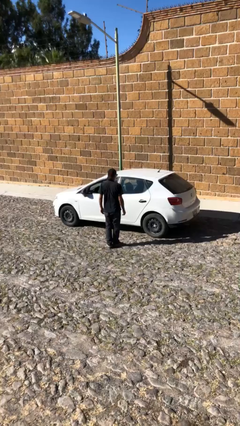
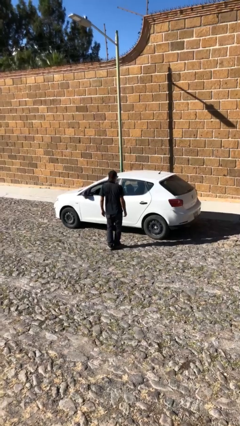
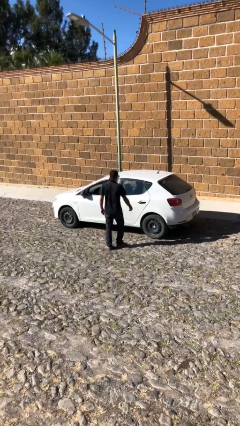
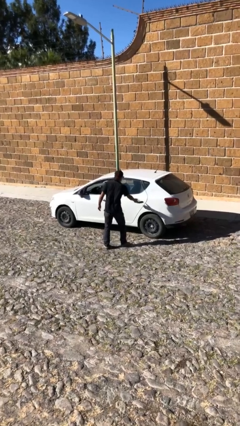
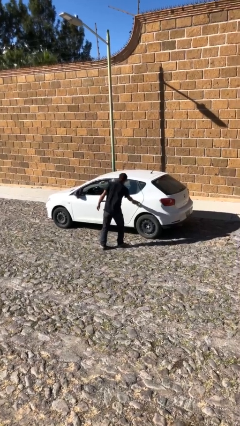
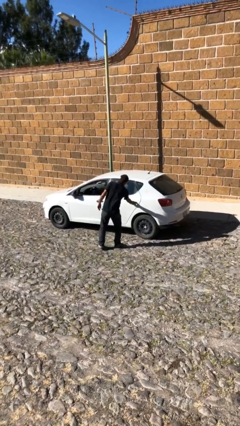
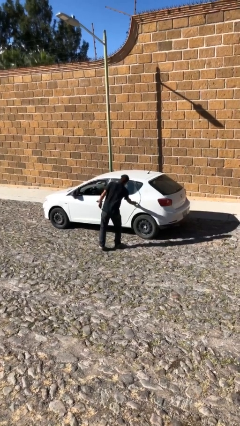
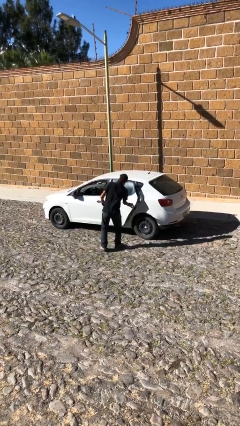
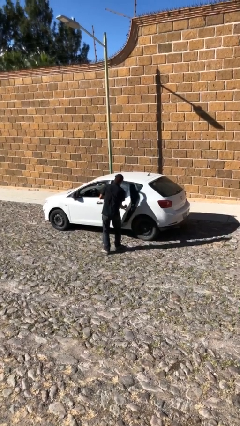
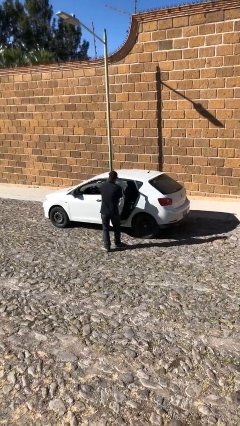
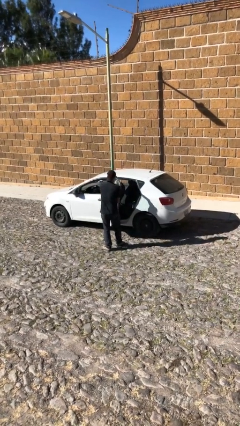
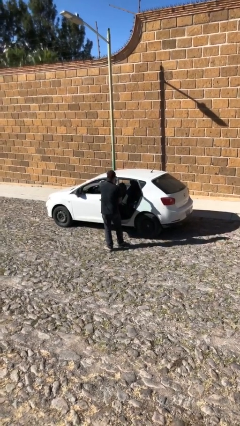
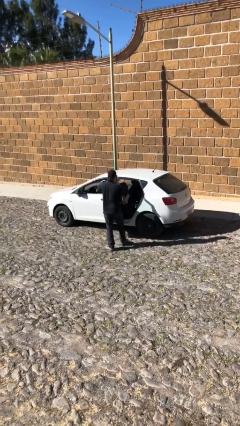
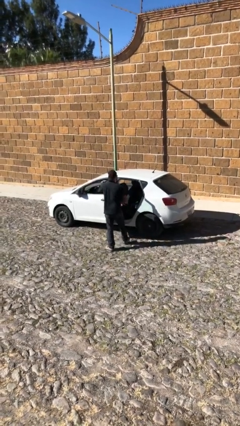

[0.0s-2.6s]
person opens car door

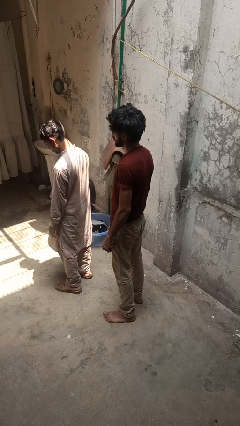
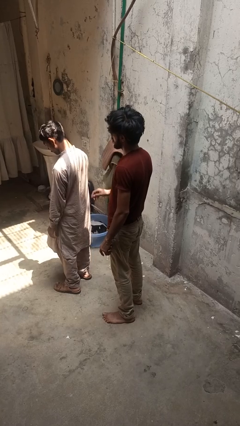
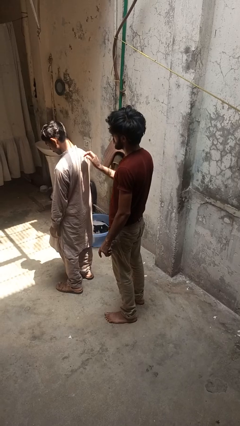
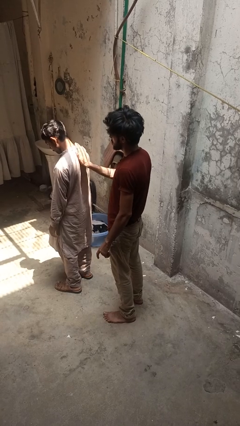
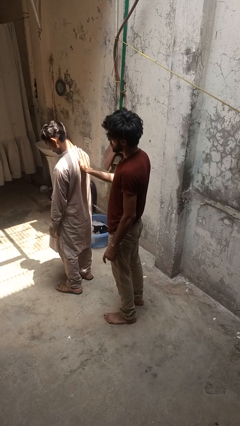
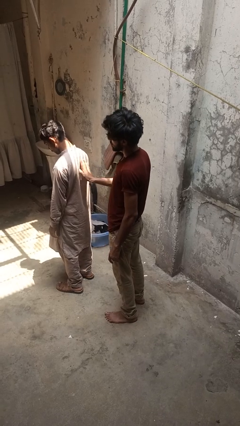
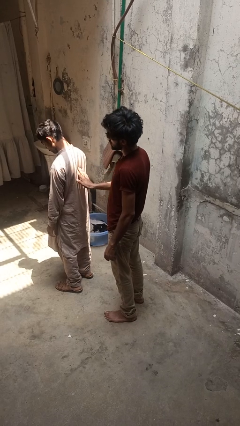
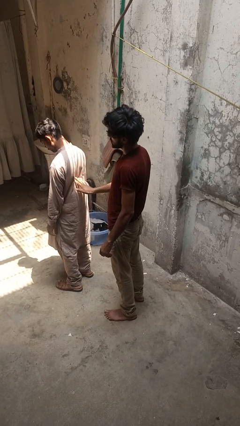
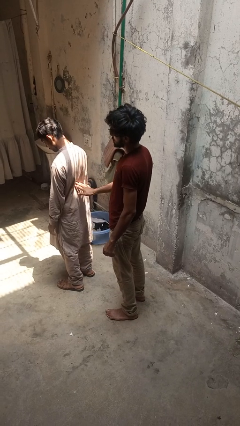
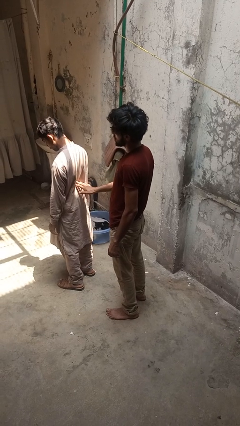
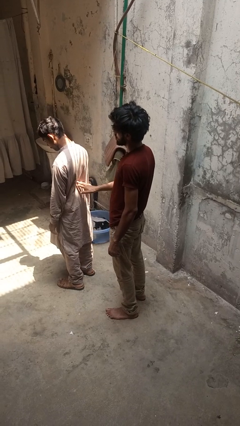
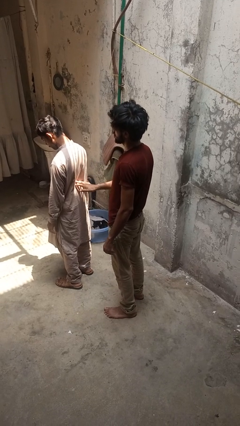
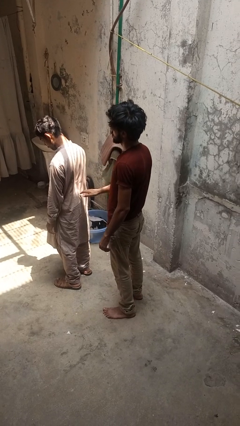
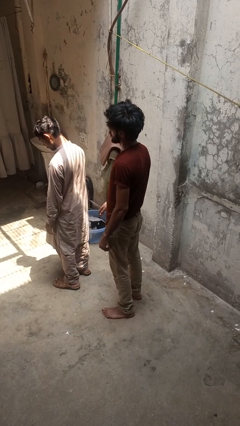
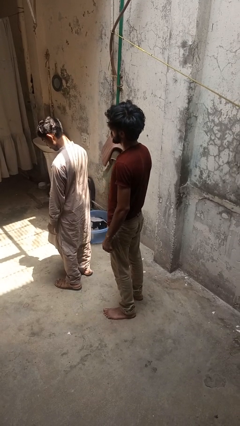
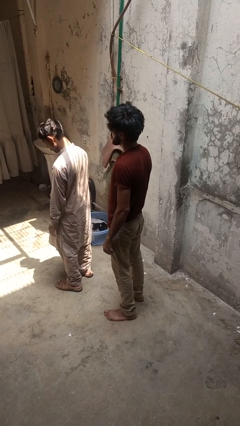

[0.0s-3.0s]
person touches back of person

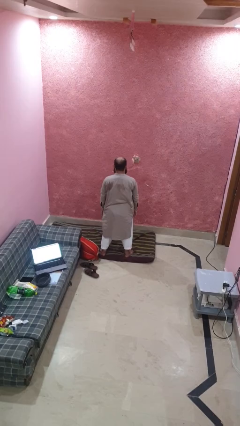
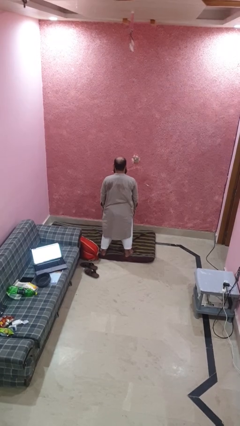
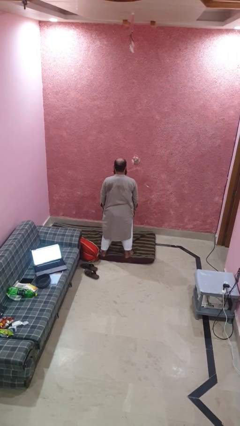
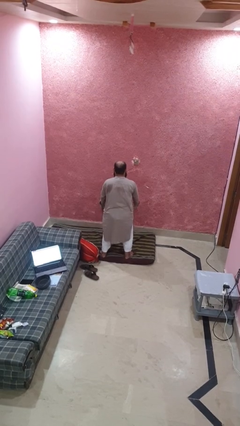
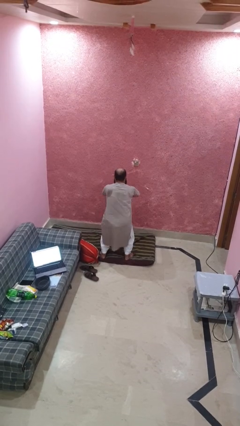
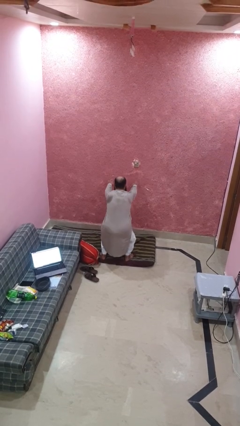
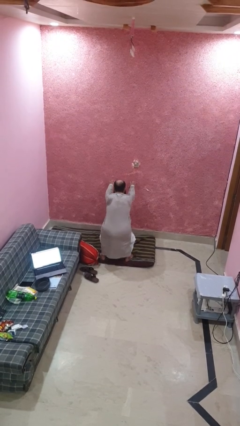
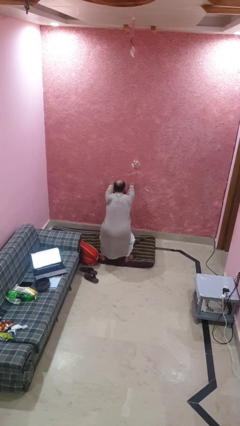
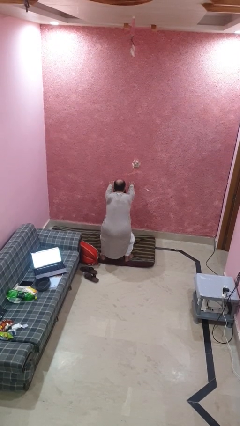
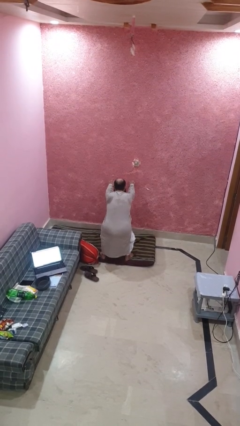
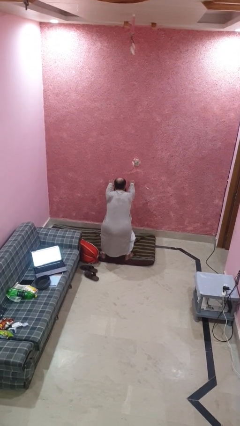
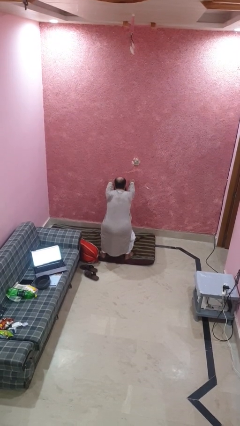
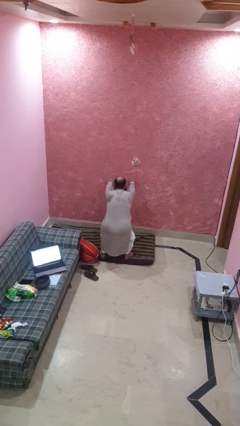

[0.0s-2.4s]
person squats

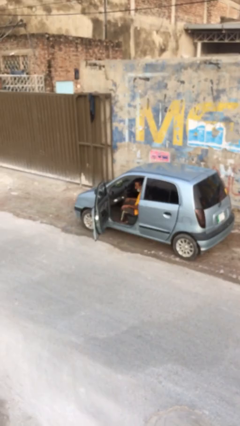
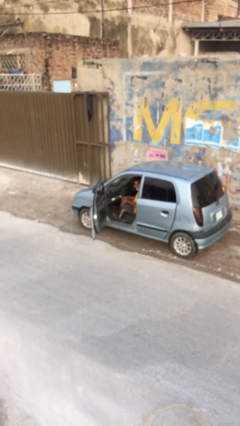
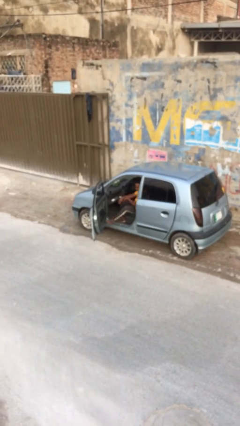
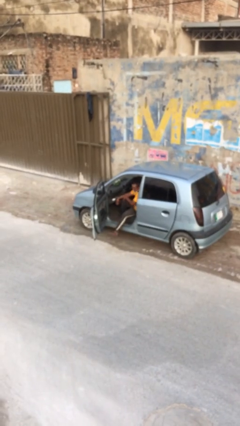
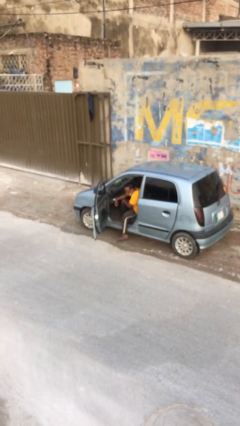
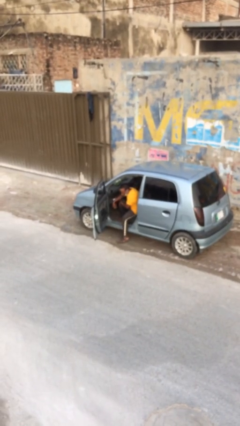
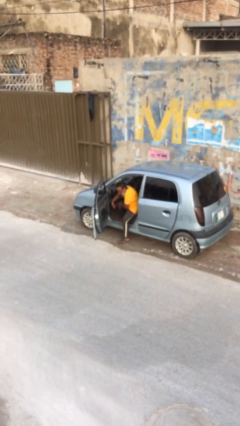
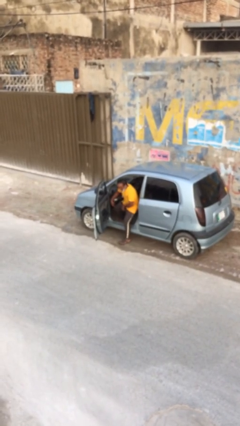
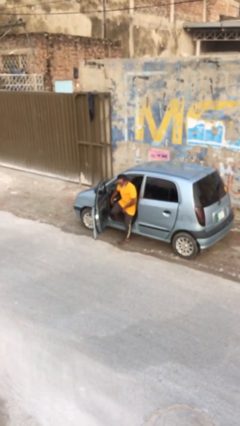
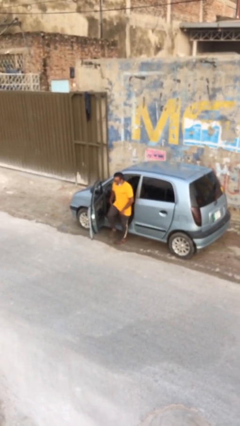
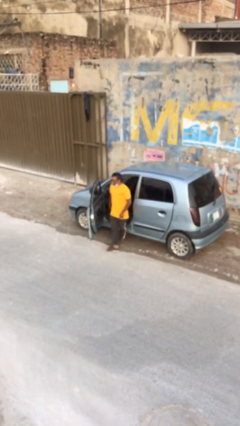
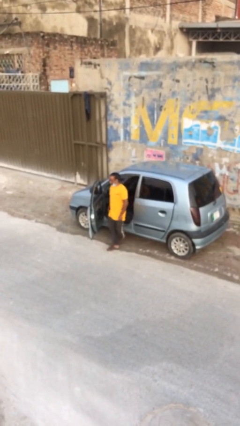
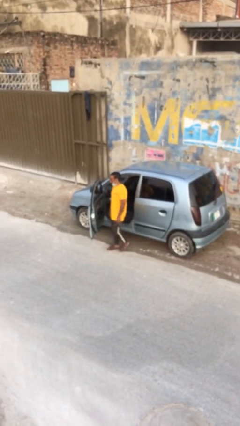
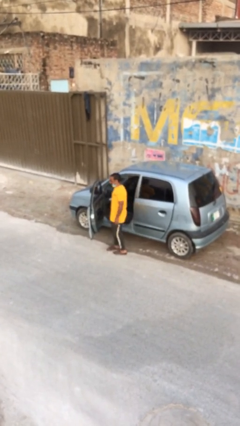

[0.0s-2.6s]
person exits car

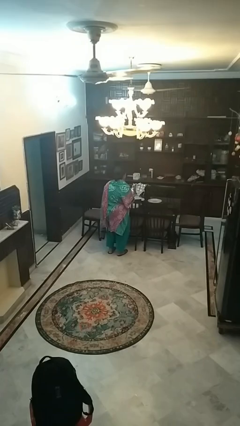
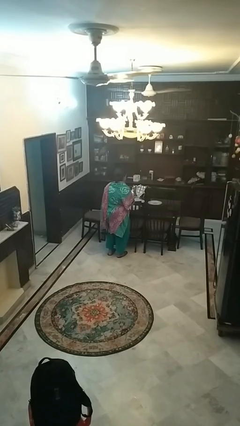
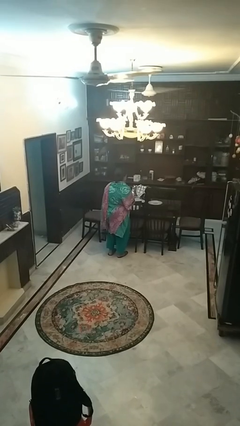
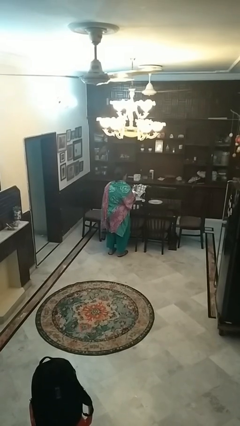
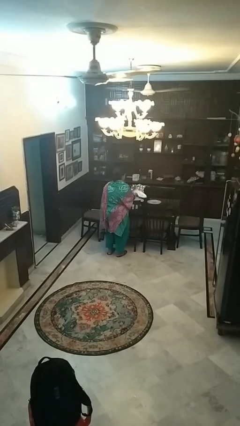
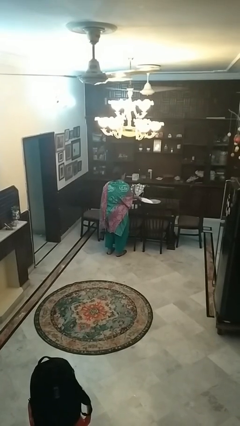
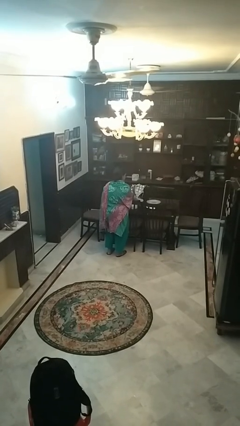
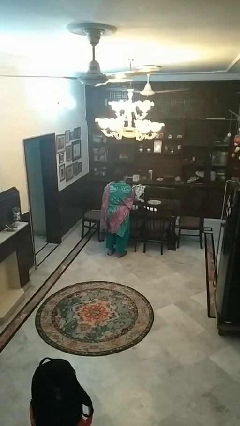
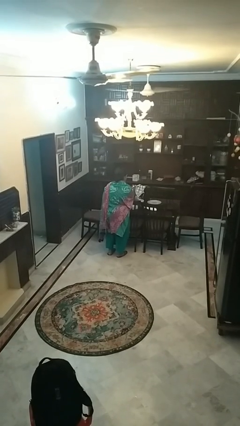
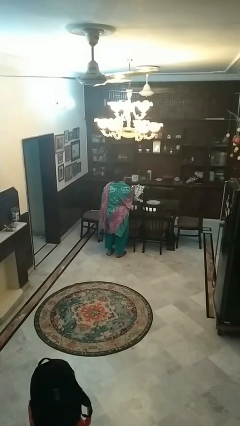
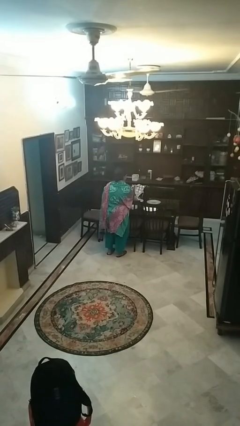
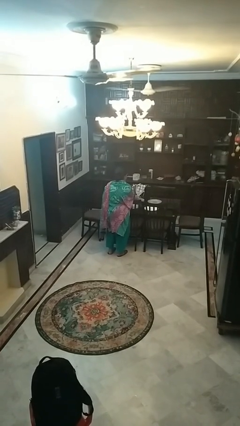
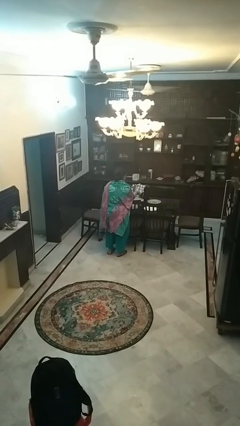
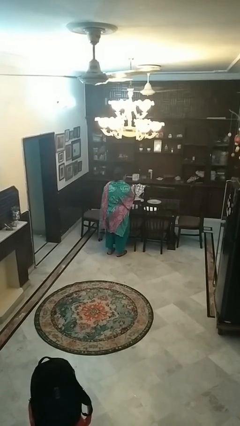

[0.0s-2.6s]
person sets table

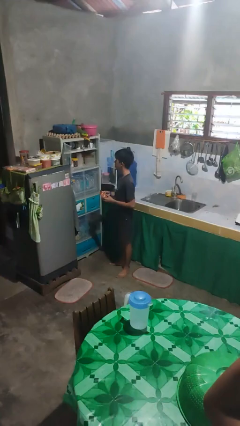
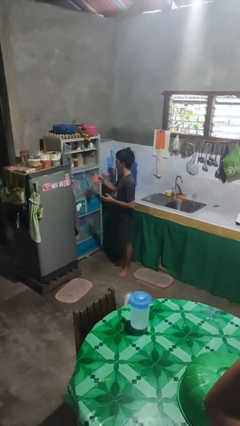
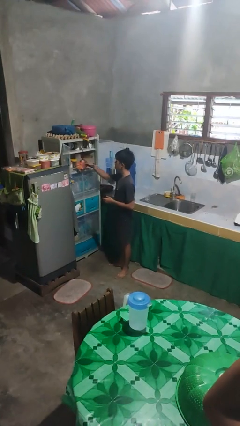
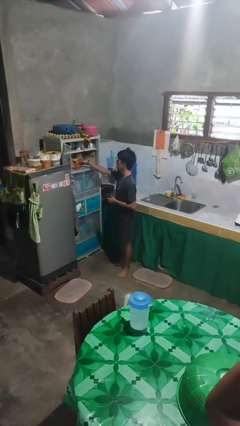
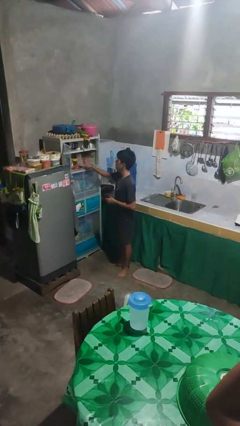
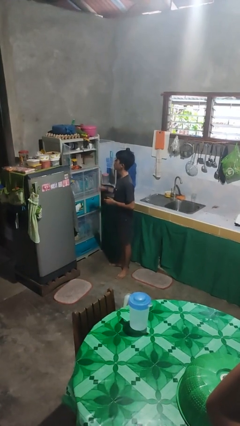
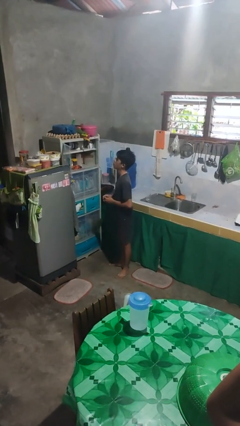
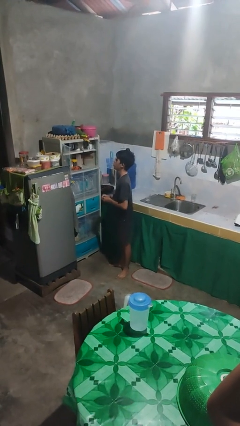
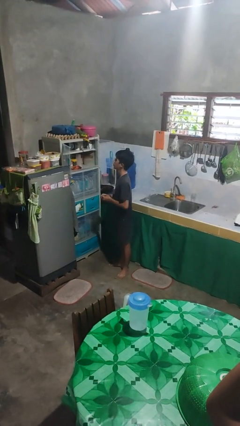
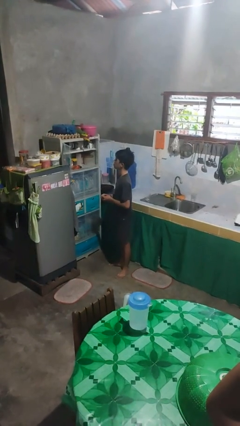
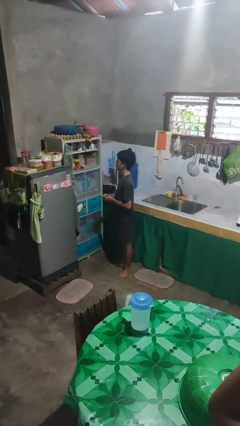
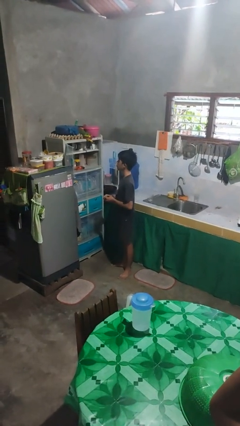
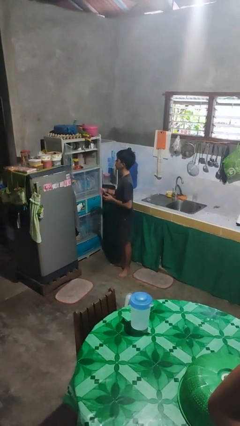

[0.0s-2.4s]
person puts object in cabinet

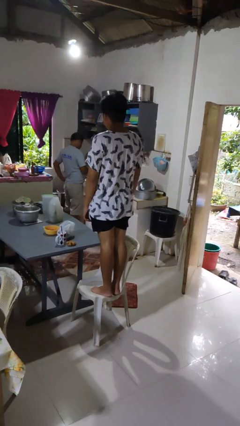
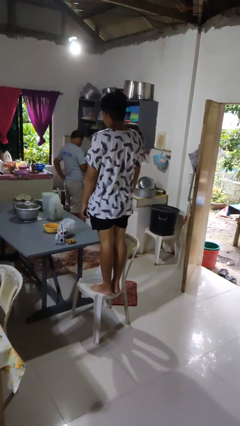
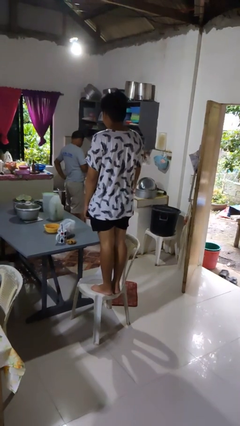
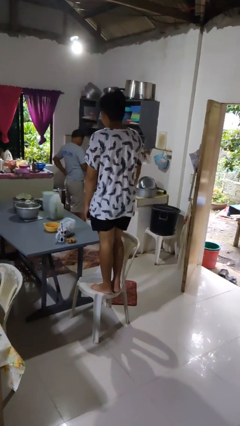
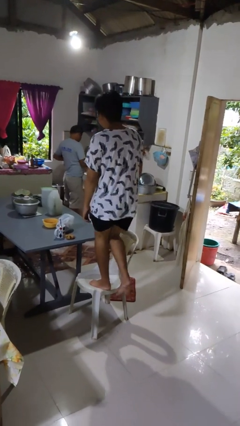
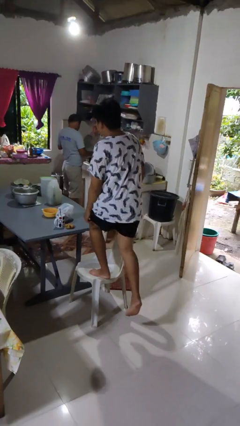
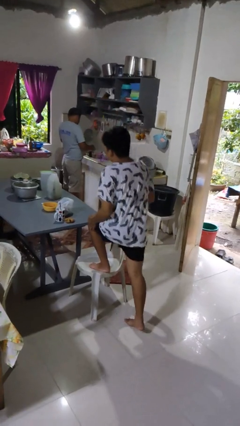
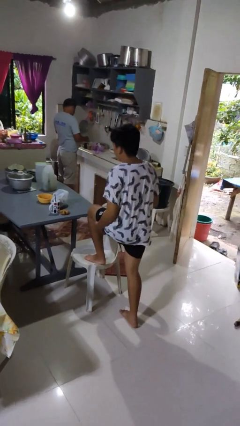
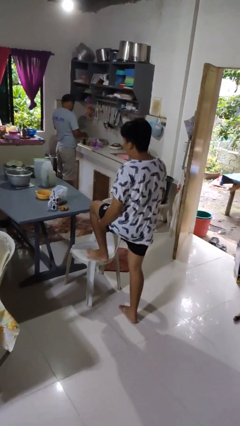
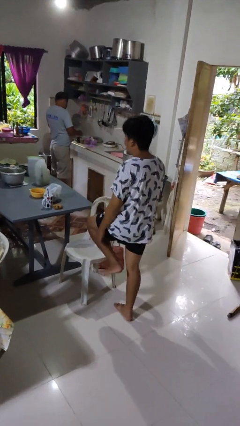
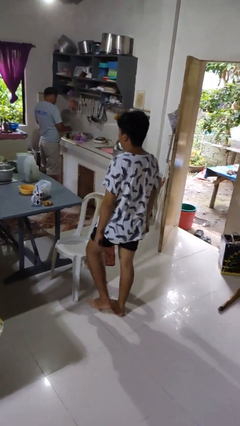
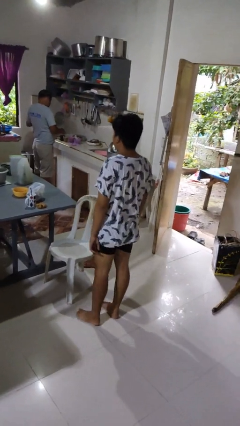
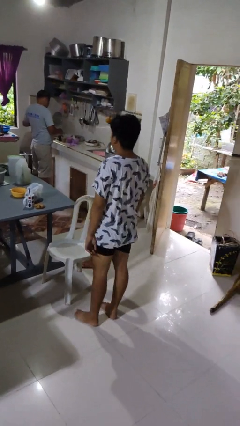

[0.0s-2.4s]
person climbs off chair
